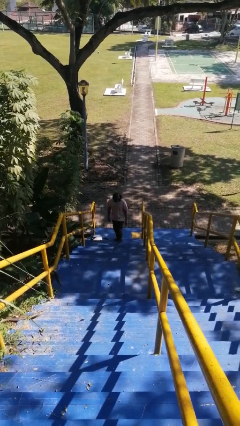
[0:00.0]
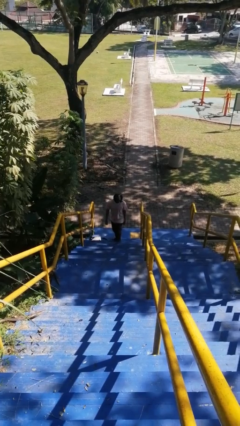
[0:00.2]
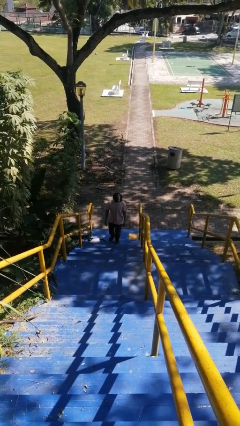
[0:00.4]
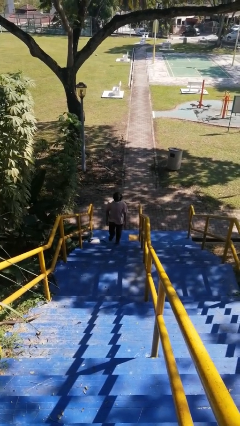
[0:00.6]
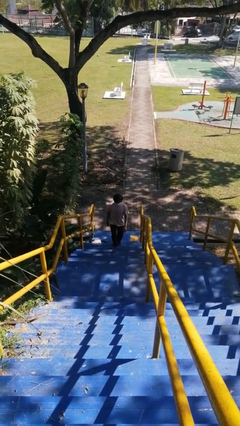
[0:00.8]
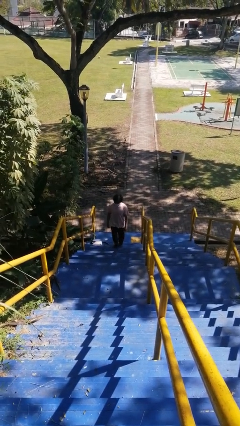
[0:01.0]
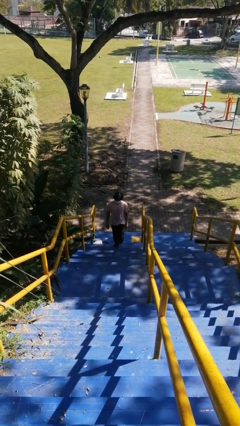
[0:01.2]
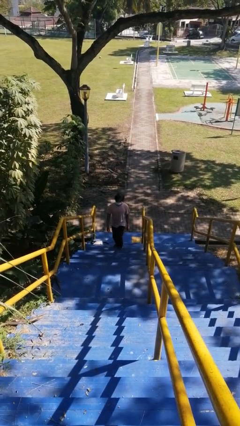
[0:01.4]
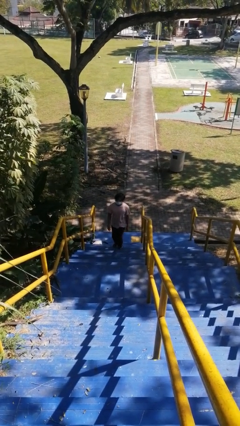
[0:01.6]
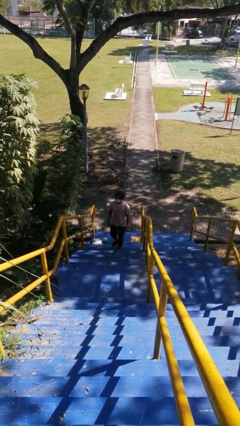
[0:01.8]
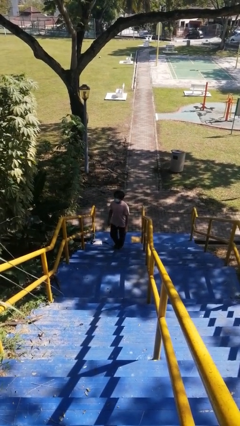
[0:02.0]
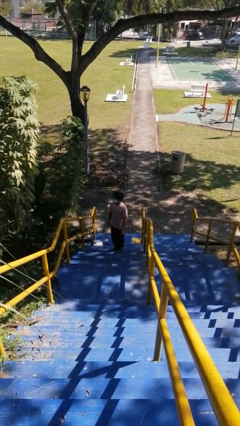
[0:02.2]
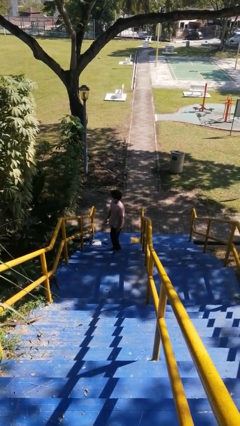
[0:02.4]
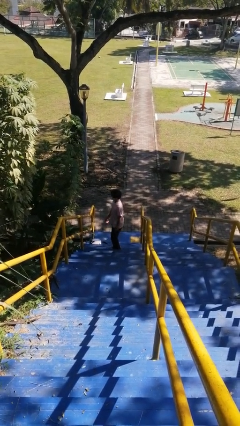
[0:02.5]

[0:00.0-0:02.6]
person climbs up stairs

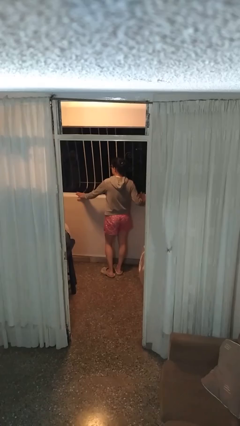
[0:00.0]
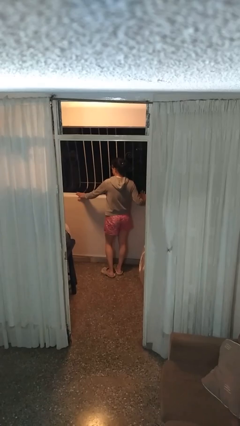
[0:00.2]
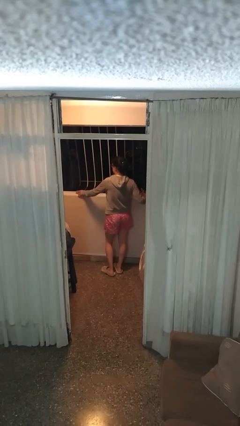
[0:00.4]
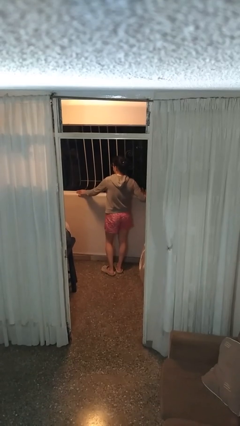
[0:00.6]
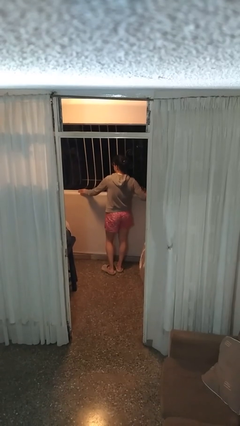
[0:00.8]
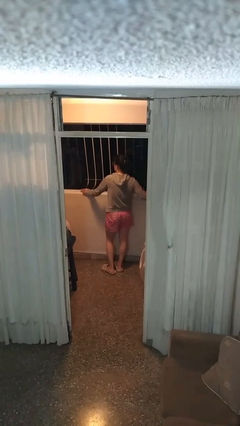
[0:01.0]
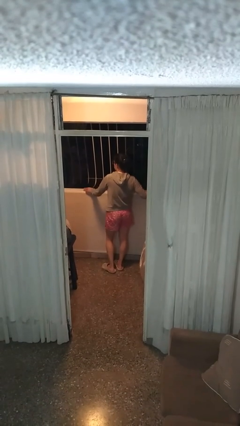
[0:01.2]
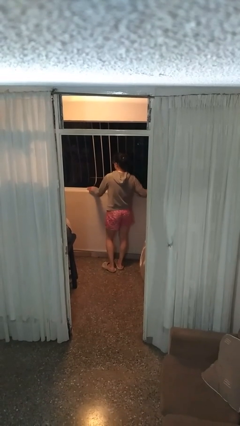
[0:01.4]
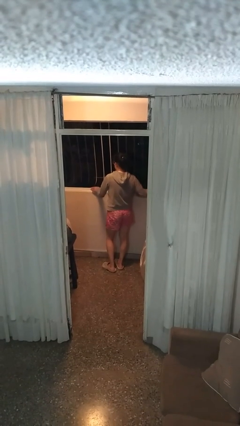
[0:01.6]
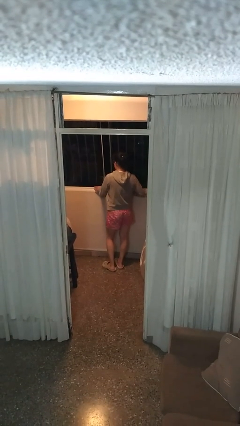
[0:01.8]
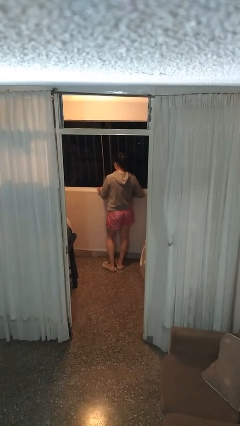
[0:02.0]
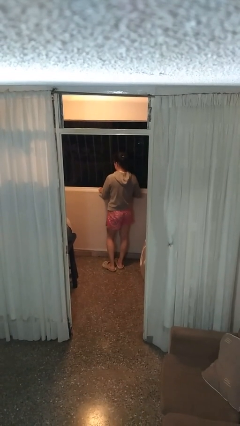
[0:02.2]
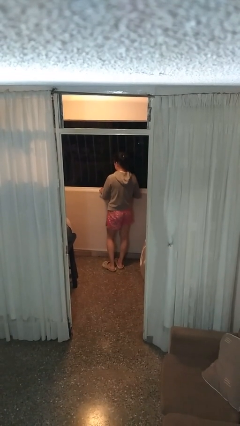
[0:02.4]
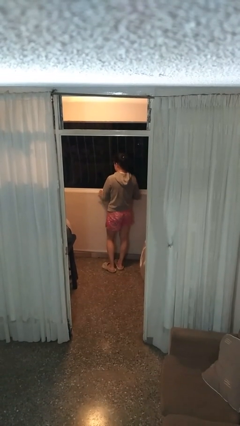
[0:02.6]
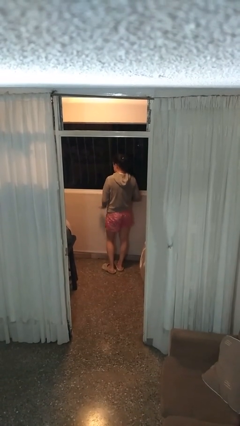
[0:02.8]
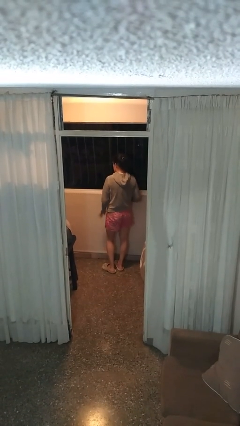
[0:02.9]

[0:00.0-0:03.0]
person closes home window

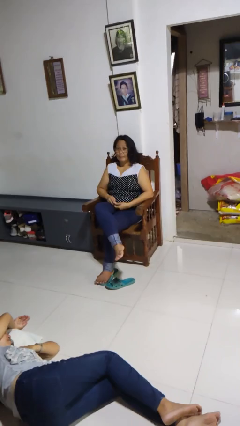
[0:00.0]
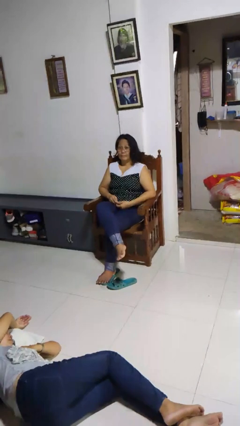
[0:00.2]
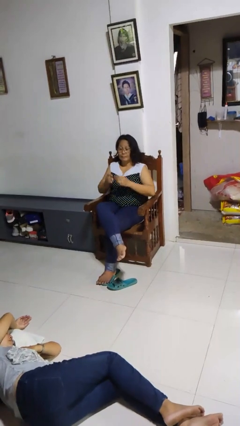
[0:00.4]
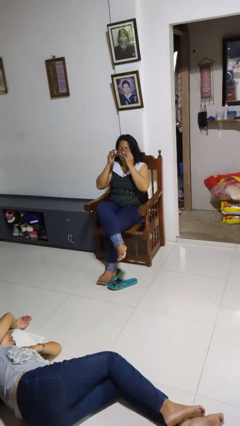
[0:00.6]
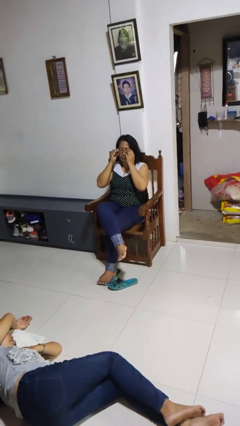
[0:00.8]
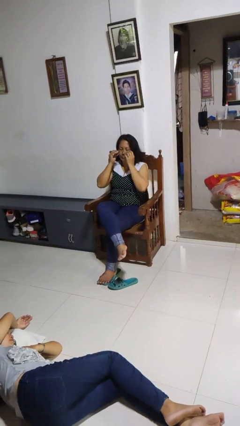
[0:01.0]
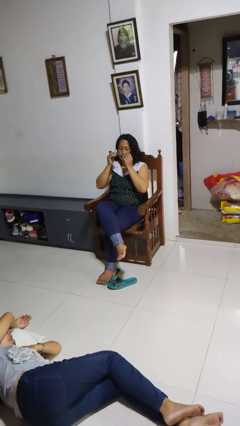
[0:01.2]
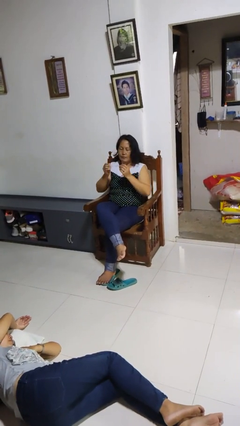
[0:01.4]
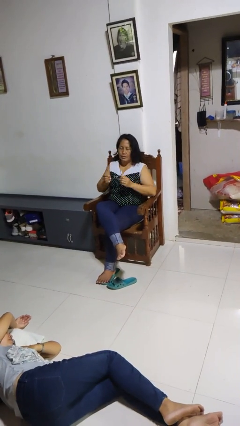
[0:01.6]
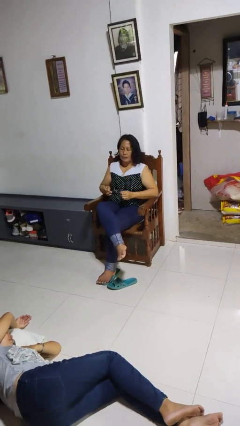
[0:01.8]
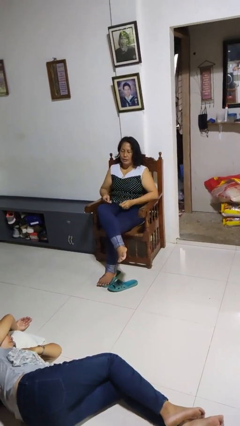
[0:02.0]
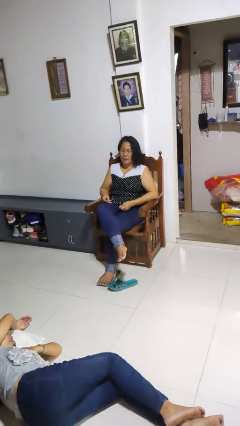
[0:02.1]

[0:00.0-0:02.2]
person takes off glasses

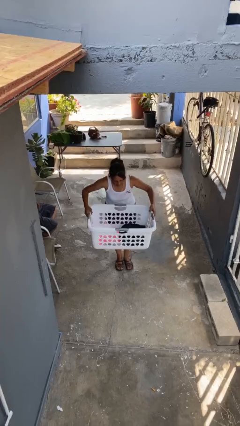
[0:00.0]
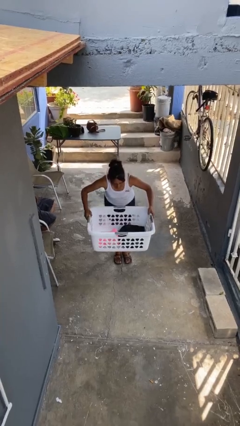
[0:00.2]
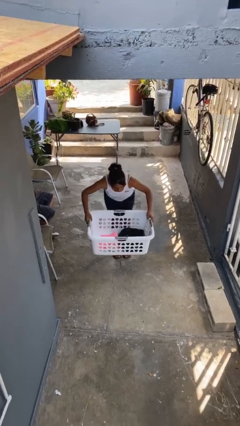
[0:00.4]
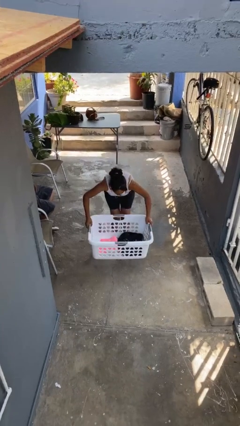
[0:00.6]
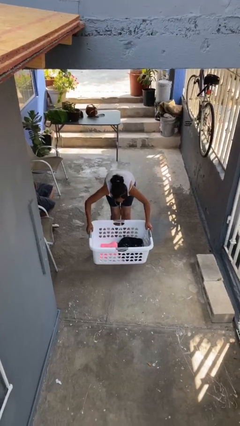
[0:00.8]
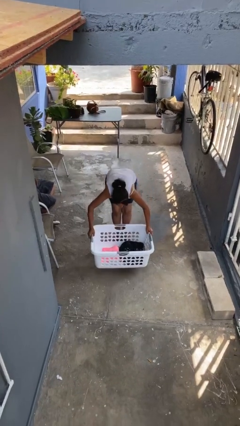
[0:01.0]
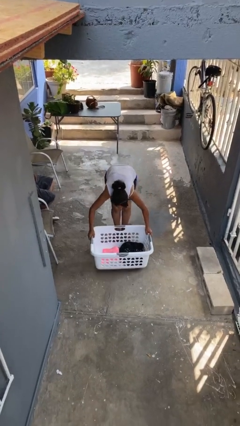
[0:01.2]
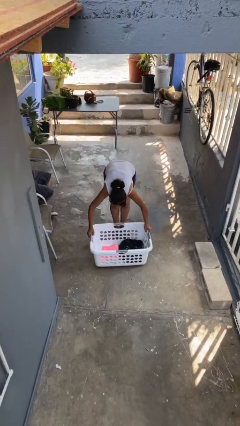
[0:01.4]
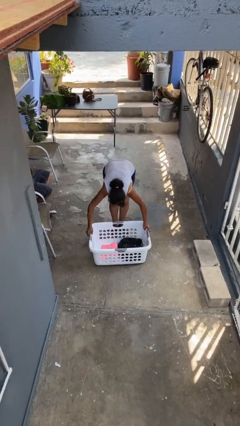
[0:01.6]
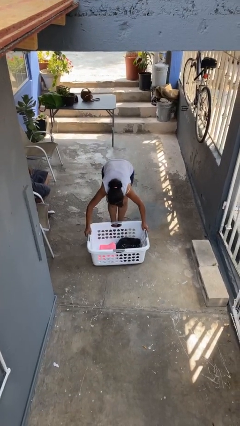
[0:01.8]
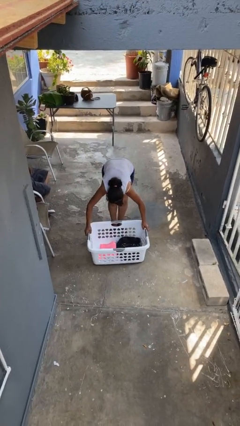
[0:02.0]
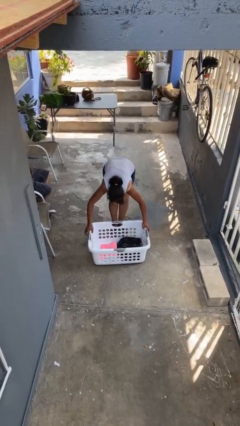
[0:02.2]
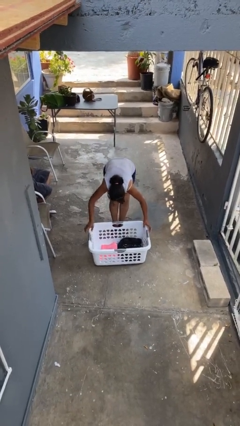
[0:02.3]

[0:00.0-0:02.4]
person puts down object on floor

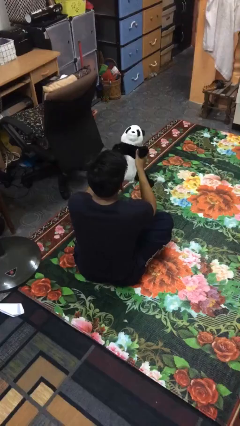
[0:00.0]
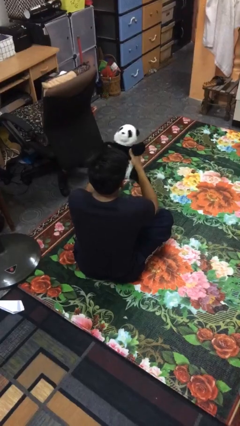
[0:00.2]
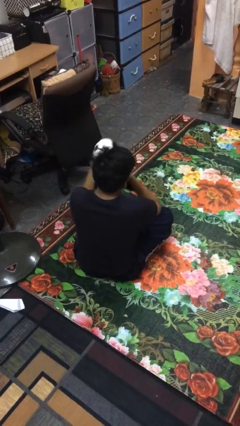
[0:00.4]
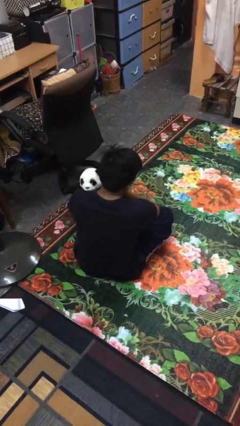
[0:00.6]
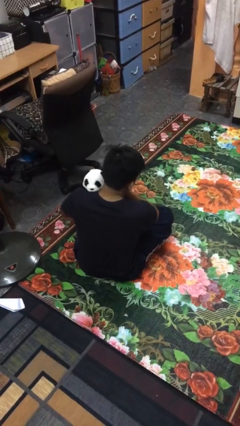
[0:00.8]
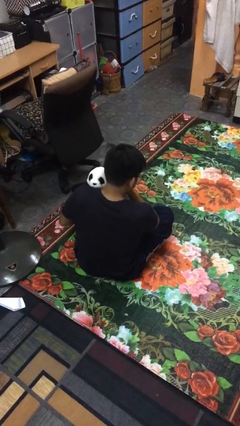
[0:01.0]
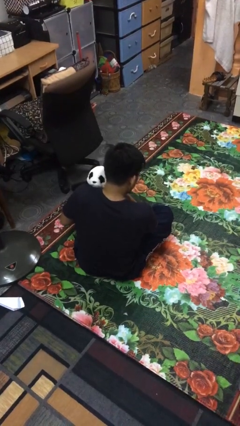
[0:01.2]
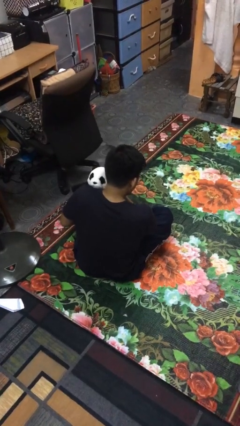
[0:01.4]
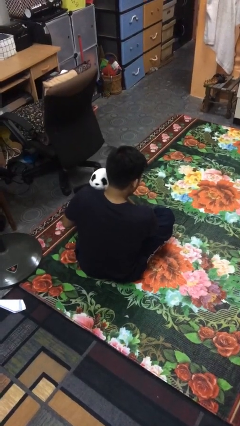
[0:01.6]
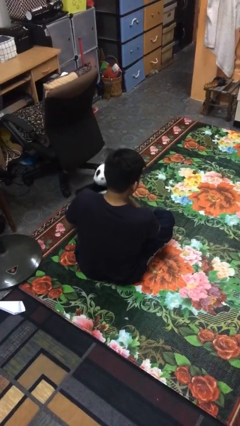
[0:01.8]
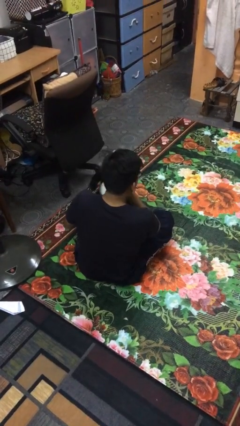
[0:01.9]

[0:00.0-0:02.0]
person hugs stuffed animal

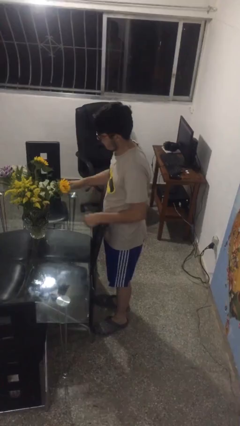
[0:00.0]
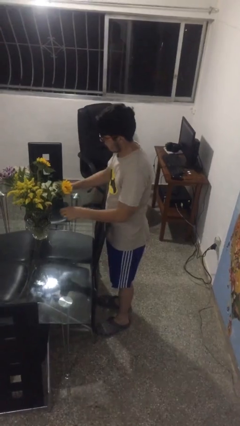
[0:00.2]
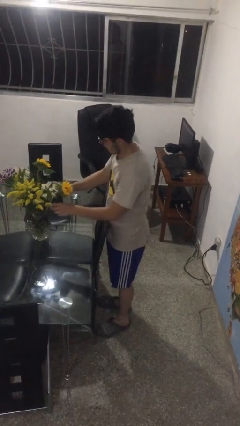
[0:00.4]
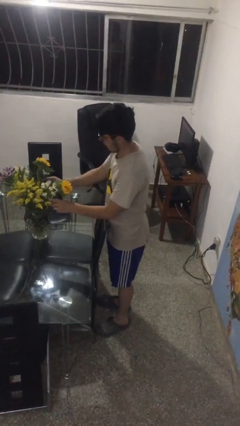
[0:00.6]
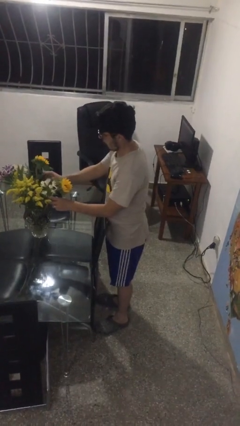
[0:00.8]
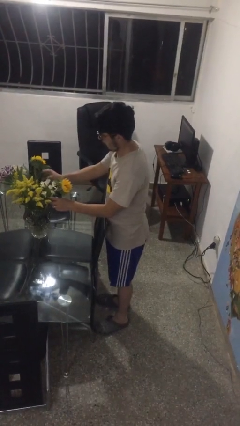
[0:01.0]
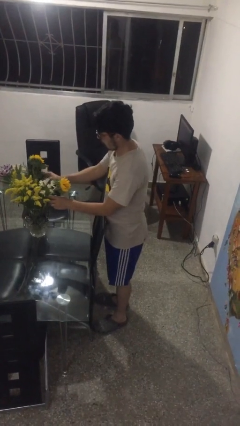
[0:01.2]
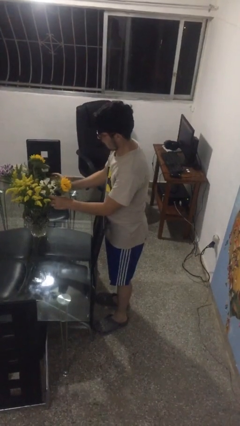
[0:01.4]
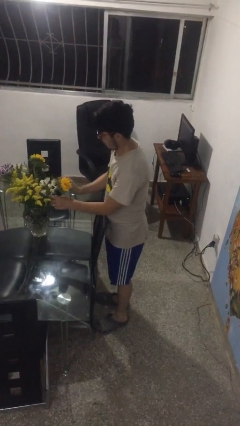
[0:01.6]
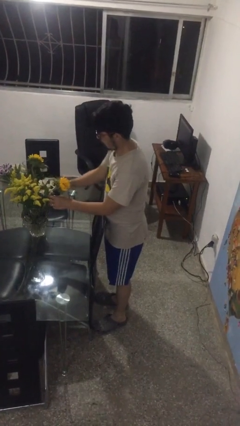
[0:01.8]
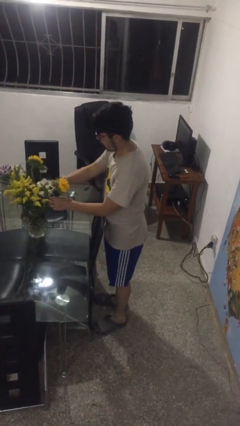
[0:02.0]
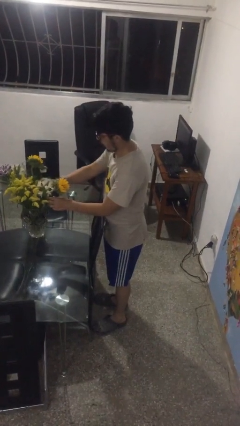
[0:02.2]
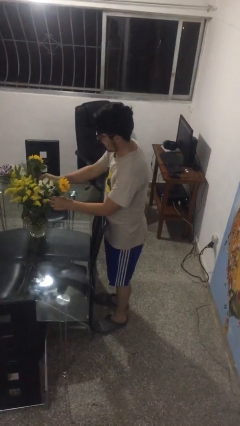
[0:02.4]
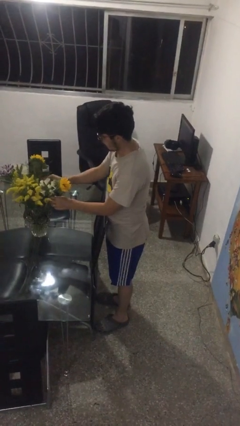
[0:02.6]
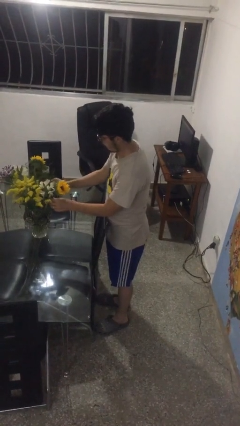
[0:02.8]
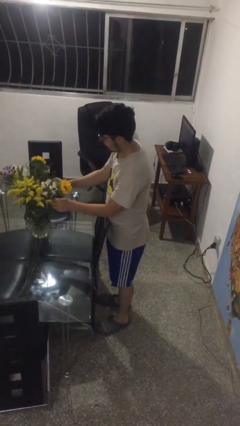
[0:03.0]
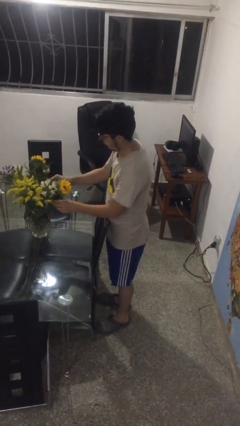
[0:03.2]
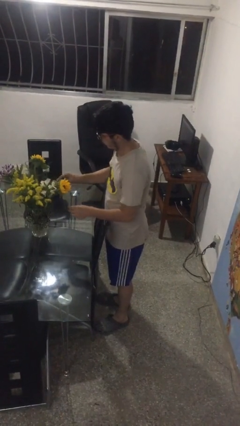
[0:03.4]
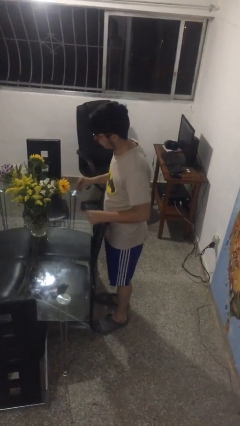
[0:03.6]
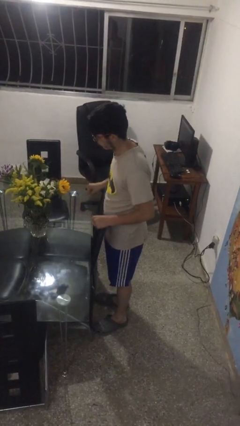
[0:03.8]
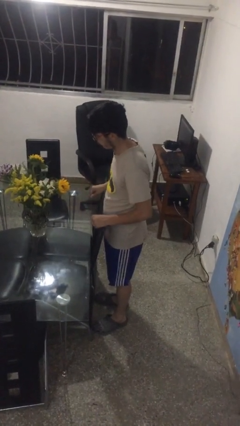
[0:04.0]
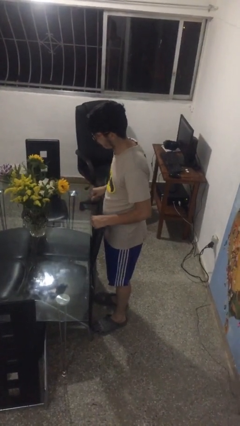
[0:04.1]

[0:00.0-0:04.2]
person arranges flowers in vase

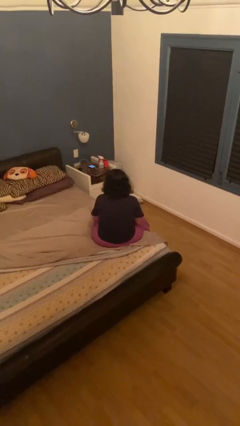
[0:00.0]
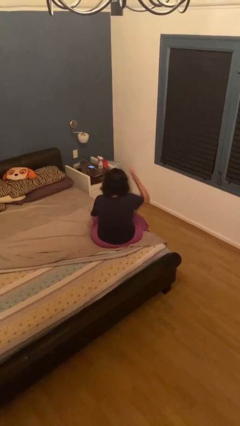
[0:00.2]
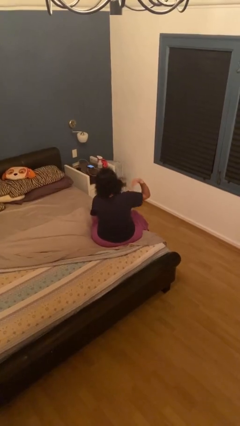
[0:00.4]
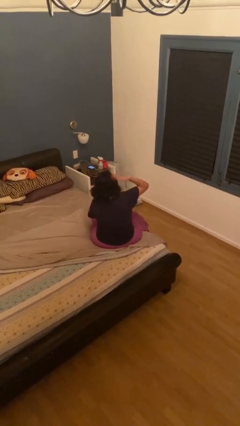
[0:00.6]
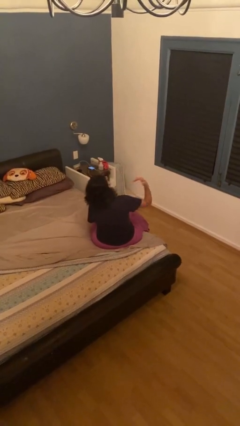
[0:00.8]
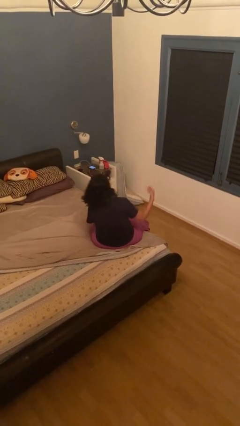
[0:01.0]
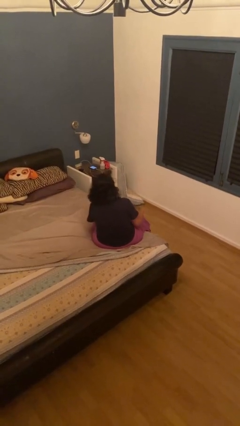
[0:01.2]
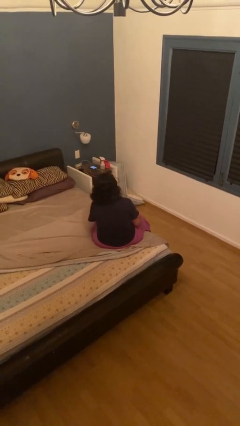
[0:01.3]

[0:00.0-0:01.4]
person swats bug
